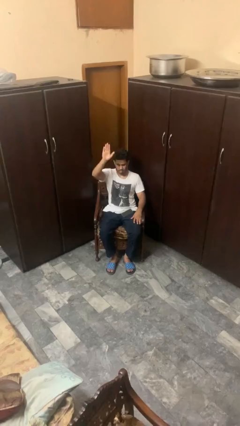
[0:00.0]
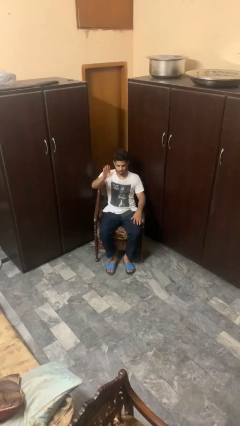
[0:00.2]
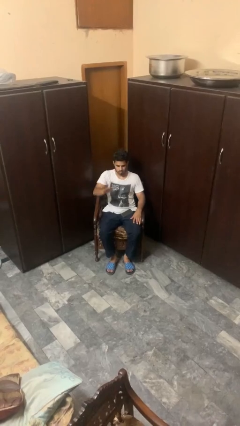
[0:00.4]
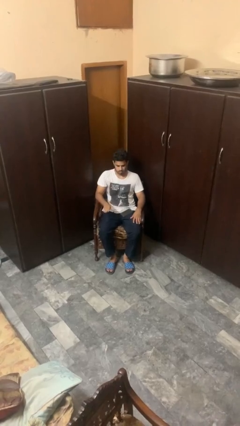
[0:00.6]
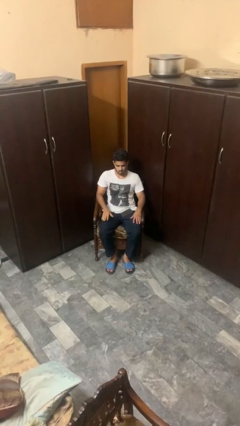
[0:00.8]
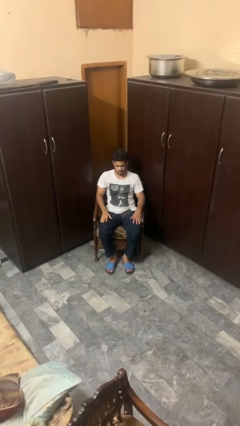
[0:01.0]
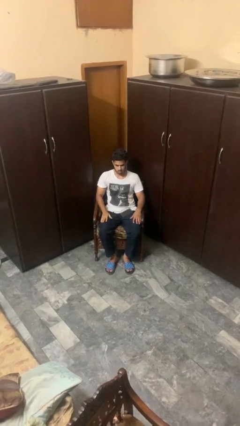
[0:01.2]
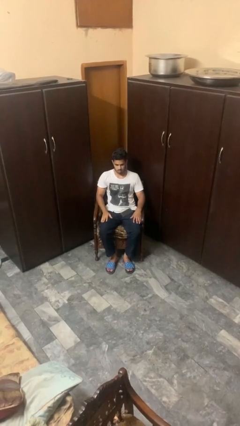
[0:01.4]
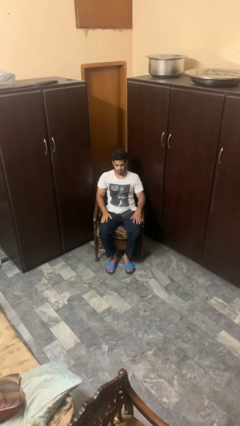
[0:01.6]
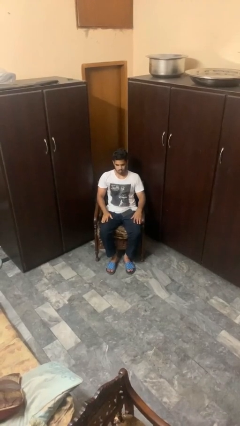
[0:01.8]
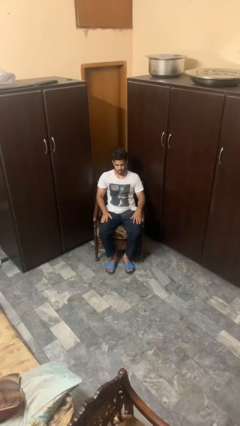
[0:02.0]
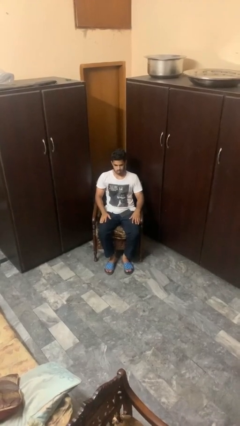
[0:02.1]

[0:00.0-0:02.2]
person gestures lower hand

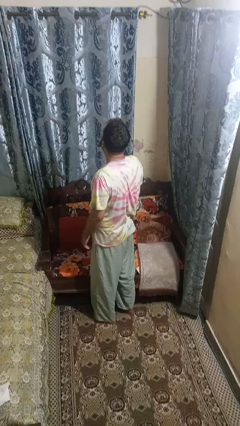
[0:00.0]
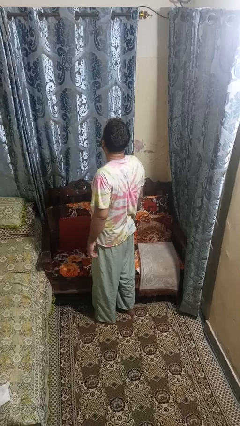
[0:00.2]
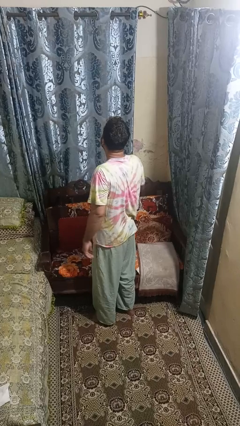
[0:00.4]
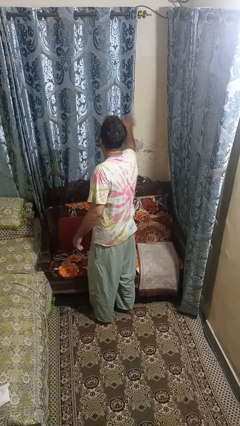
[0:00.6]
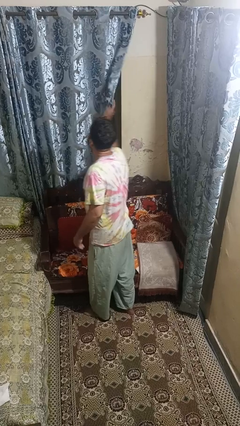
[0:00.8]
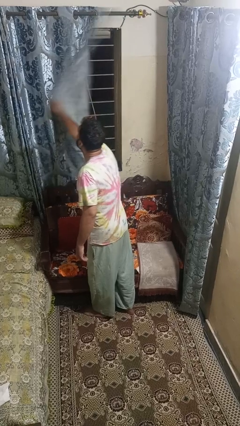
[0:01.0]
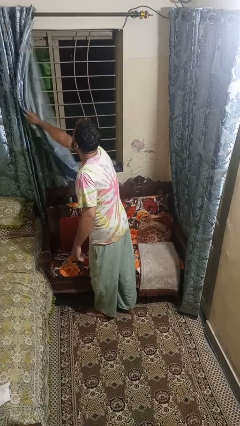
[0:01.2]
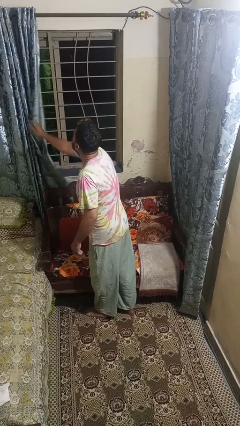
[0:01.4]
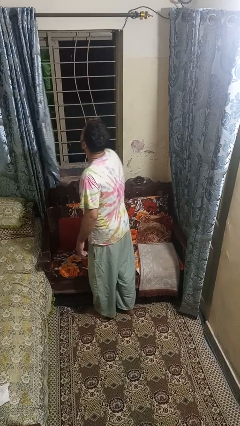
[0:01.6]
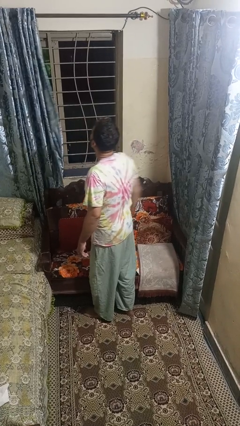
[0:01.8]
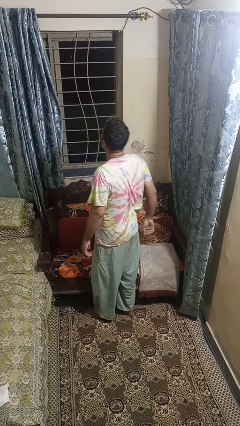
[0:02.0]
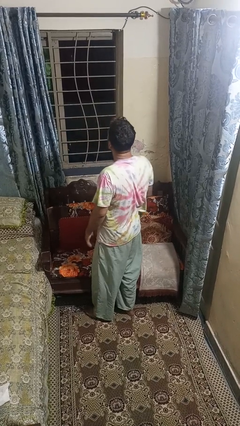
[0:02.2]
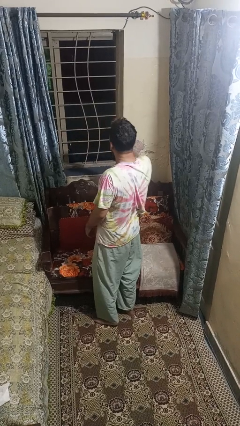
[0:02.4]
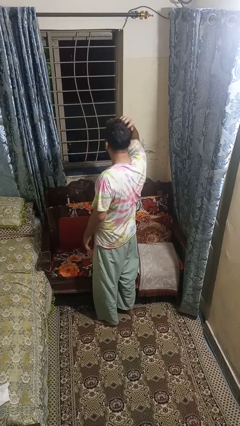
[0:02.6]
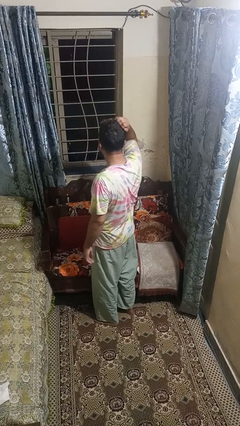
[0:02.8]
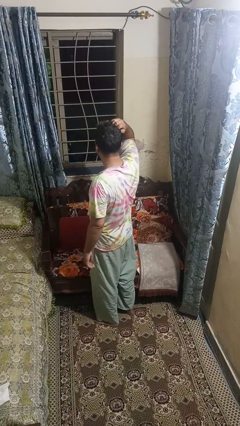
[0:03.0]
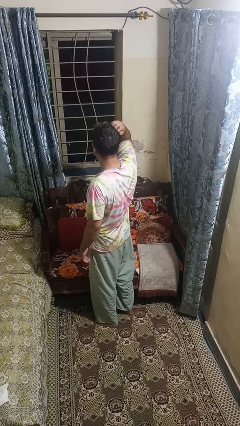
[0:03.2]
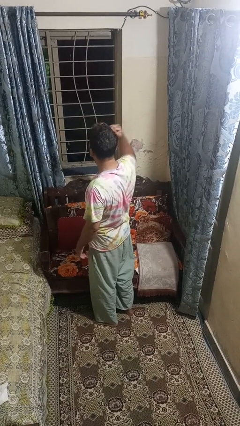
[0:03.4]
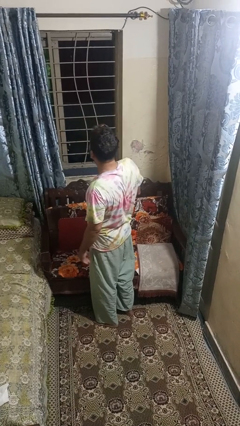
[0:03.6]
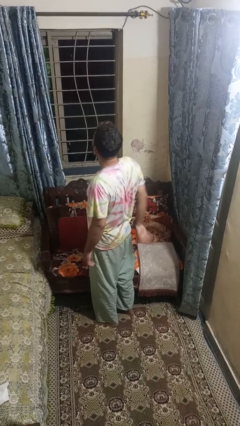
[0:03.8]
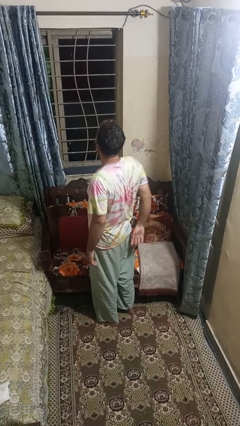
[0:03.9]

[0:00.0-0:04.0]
person opens curtains

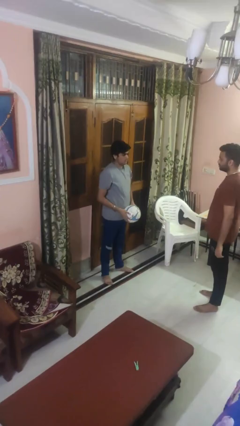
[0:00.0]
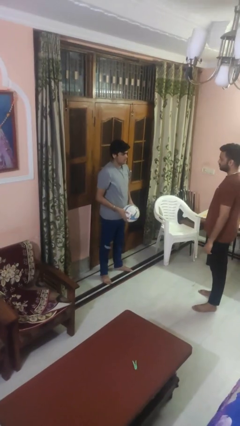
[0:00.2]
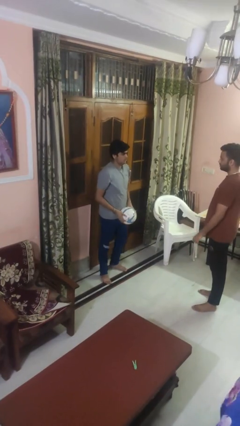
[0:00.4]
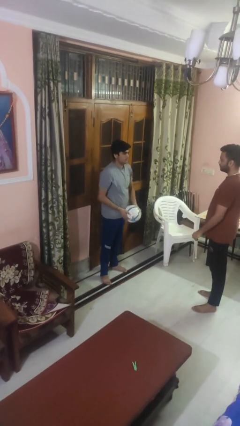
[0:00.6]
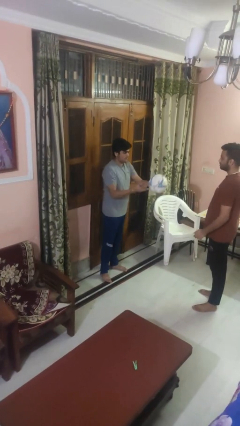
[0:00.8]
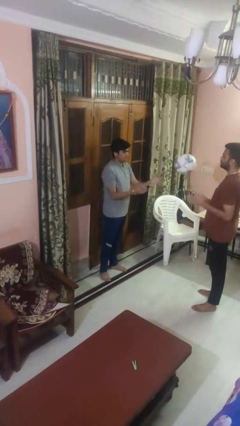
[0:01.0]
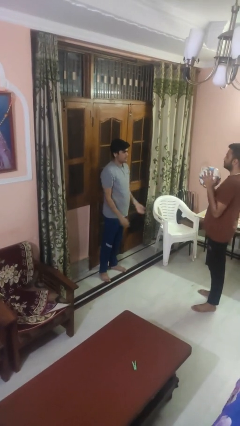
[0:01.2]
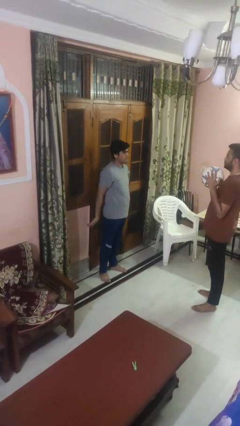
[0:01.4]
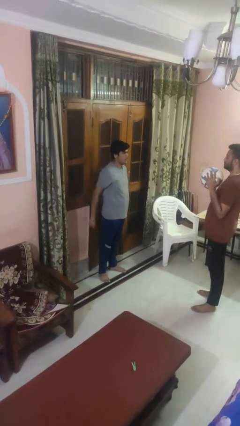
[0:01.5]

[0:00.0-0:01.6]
person throws object to person

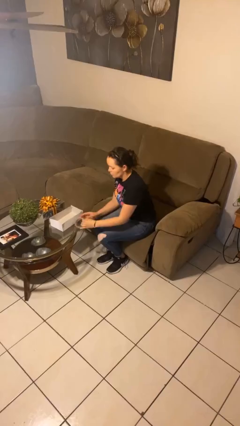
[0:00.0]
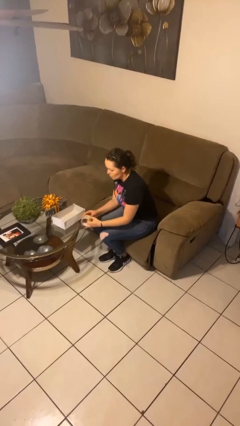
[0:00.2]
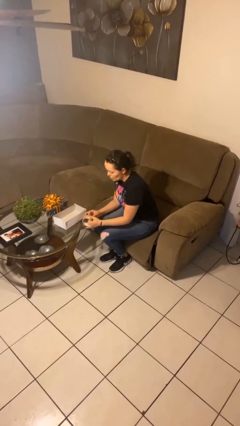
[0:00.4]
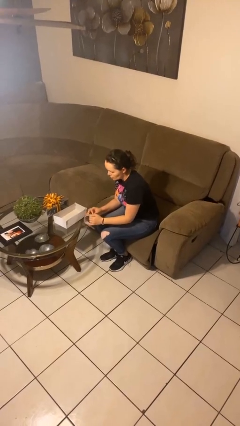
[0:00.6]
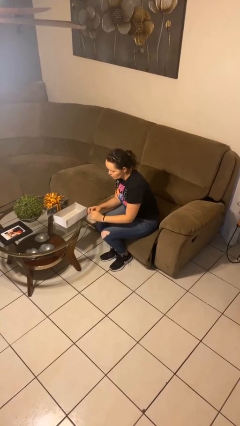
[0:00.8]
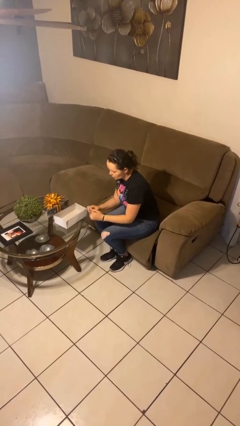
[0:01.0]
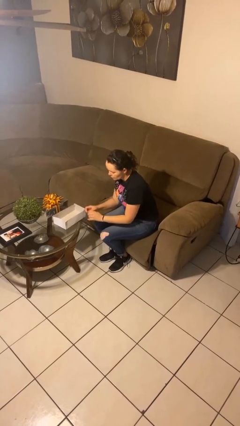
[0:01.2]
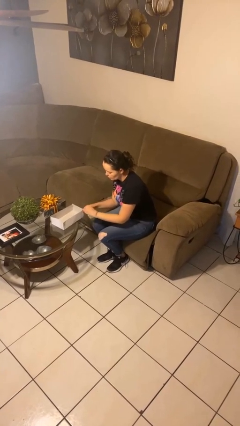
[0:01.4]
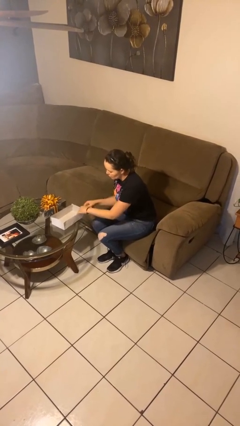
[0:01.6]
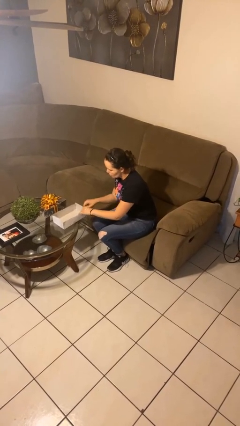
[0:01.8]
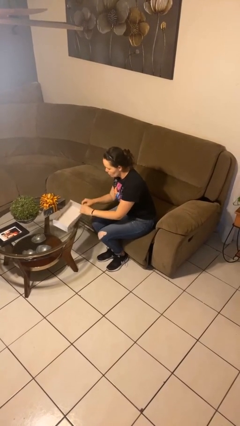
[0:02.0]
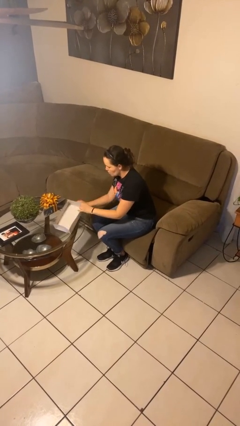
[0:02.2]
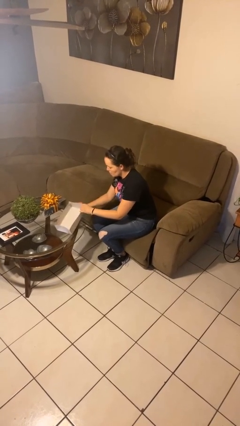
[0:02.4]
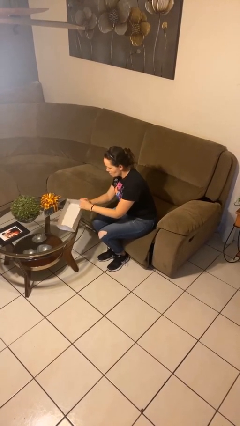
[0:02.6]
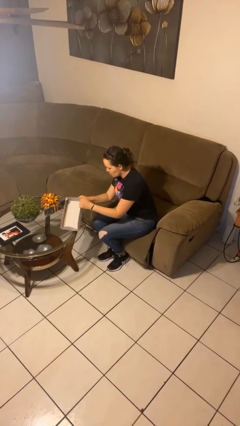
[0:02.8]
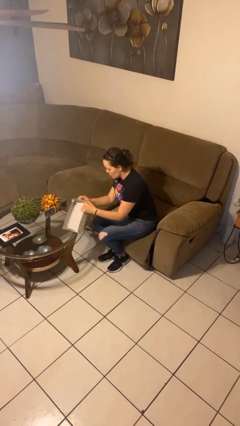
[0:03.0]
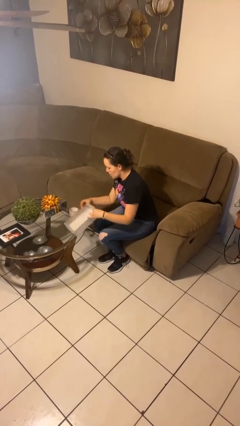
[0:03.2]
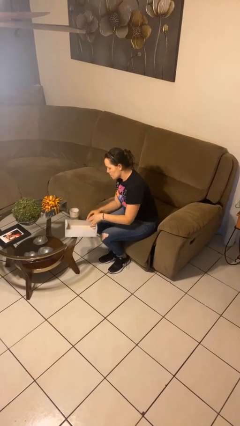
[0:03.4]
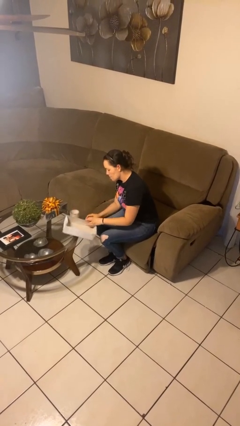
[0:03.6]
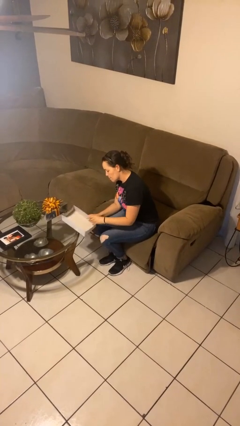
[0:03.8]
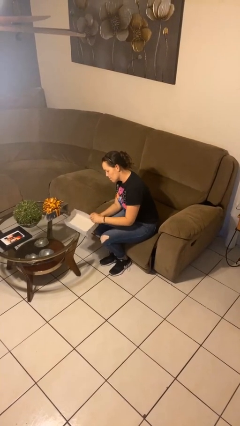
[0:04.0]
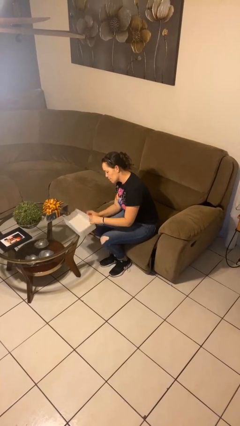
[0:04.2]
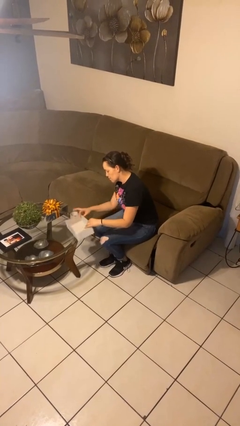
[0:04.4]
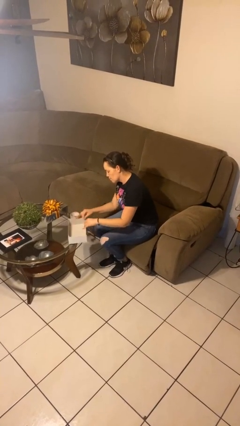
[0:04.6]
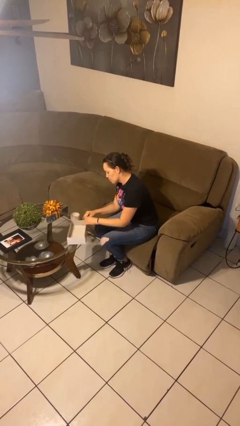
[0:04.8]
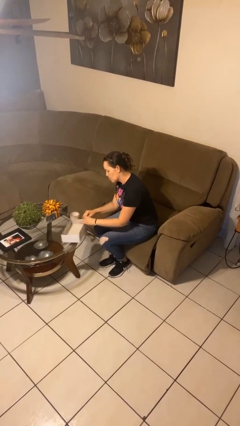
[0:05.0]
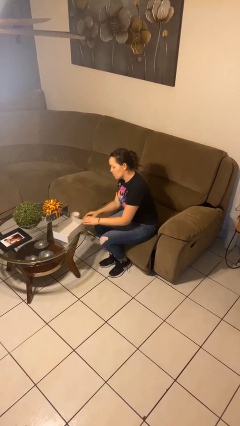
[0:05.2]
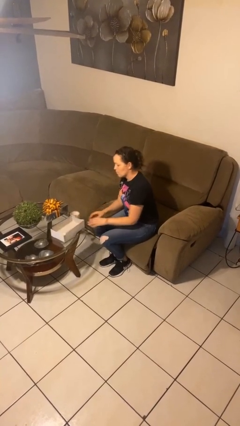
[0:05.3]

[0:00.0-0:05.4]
person wraps box

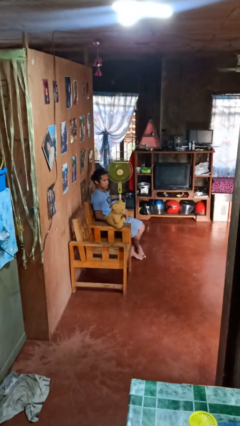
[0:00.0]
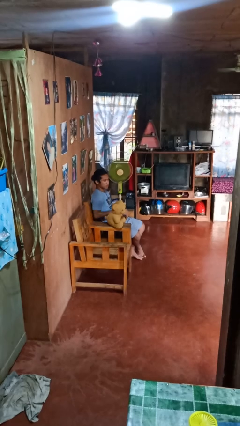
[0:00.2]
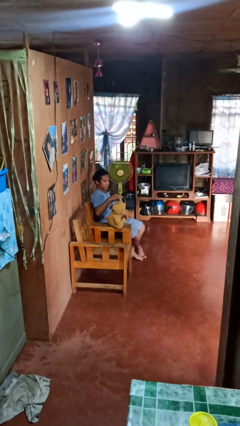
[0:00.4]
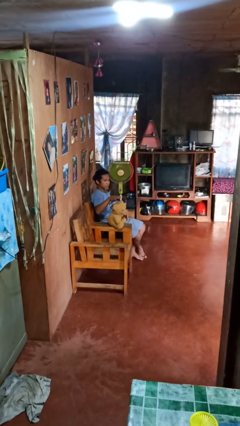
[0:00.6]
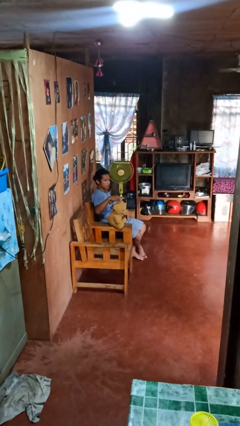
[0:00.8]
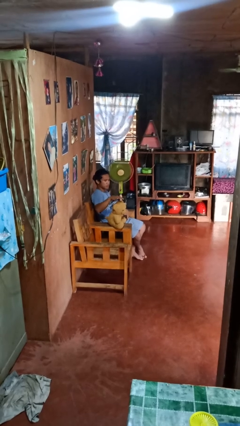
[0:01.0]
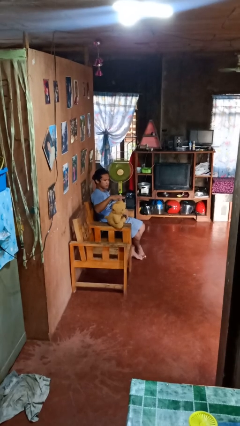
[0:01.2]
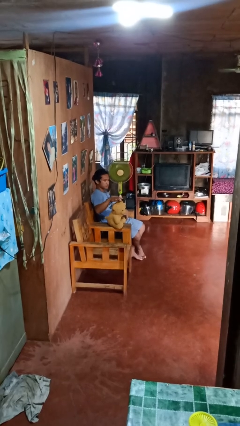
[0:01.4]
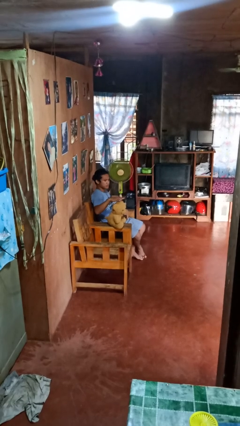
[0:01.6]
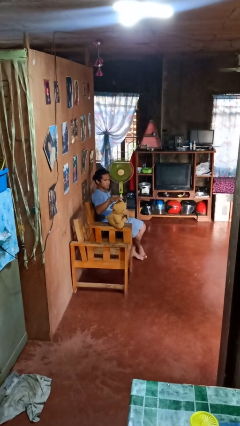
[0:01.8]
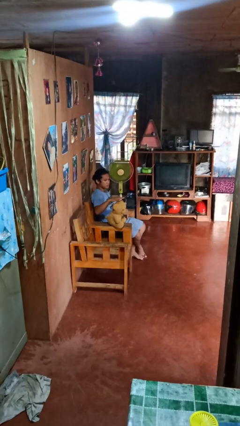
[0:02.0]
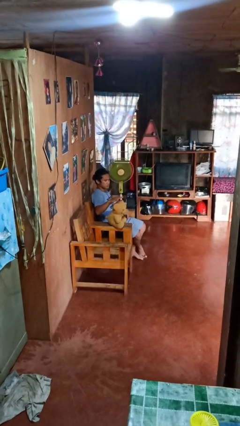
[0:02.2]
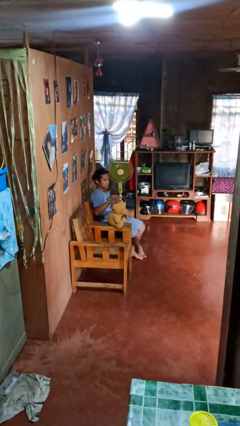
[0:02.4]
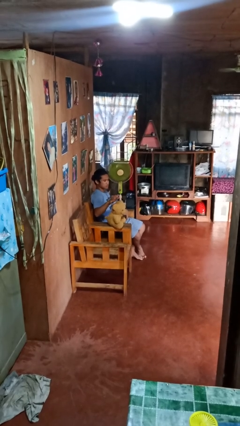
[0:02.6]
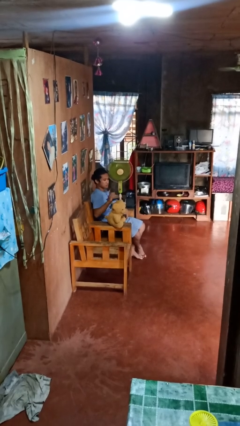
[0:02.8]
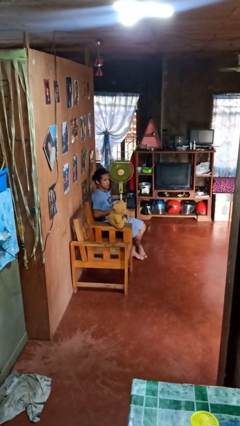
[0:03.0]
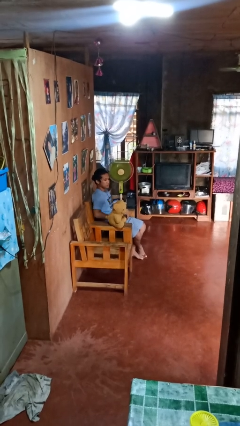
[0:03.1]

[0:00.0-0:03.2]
person waves hand over object

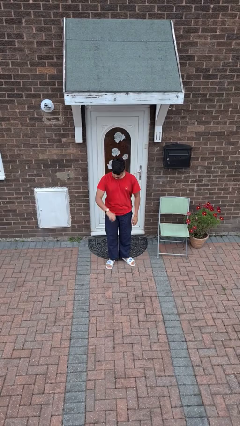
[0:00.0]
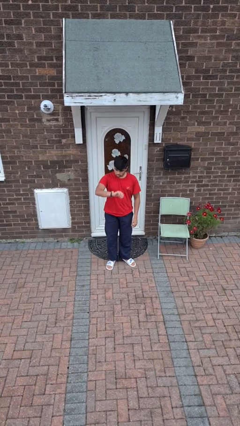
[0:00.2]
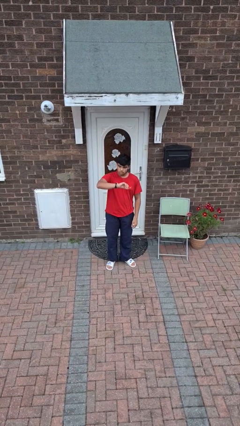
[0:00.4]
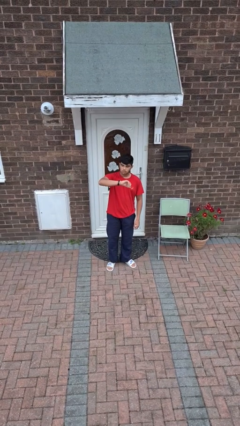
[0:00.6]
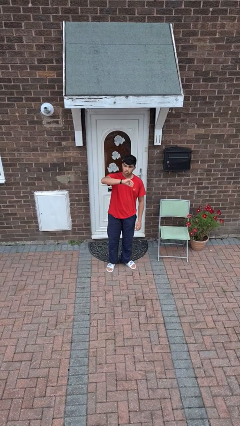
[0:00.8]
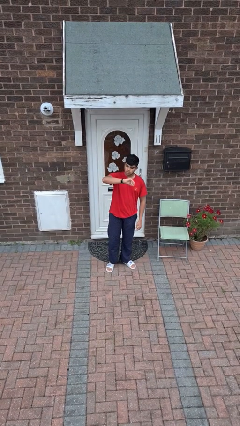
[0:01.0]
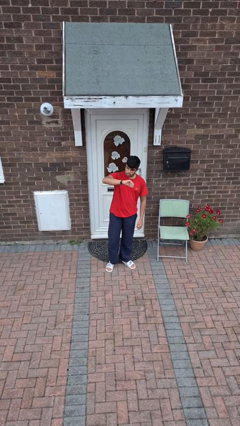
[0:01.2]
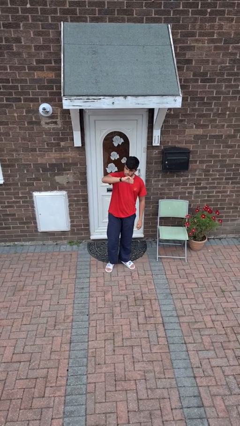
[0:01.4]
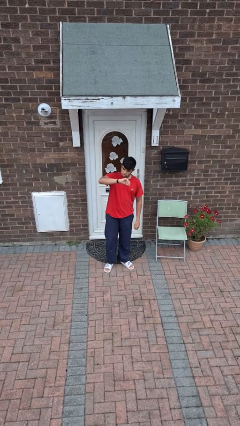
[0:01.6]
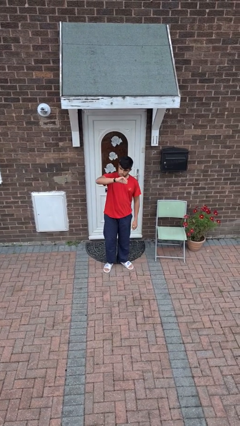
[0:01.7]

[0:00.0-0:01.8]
person looks at wristwatch
